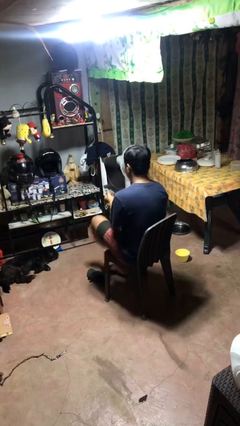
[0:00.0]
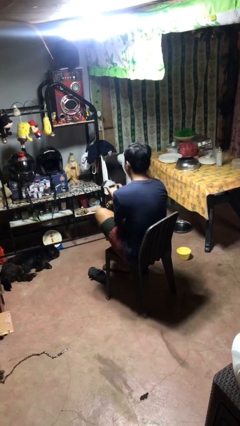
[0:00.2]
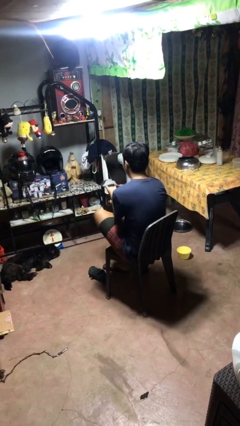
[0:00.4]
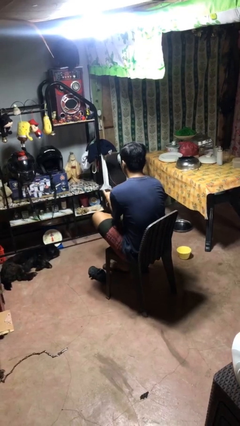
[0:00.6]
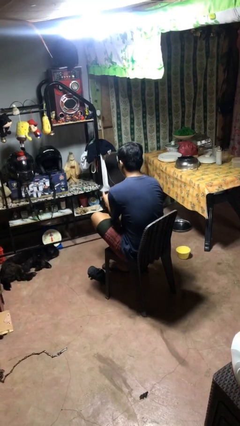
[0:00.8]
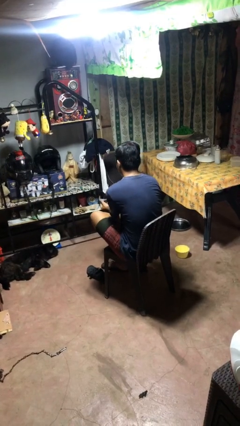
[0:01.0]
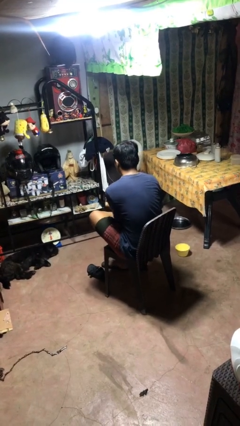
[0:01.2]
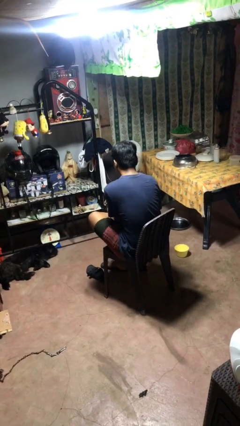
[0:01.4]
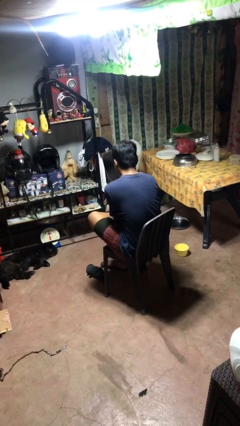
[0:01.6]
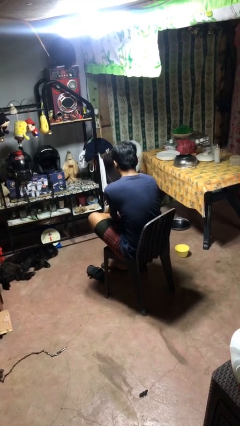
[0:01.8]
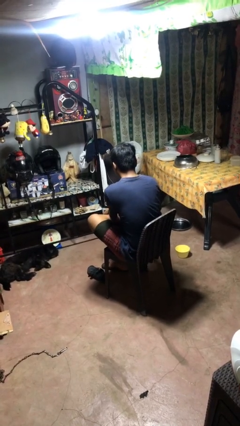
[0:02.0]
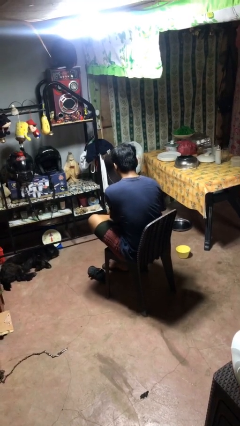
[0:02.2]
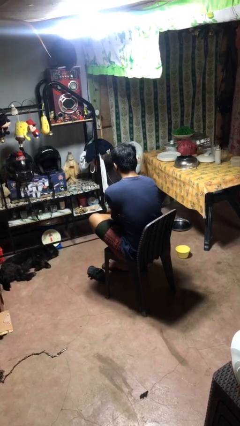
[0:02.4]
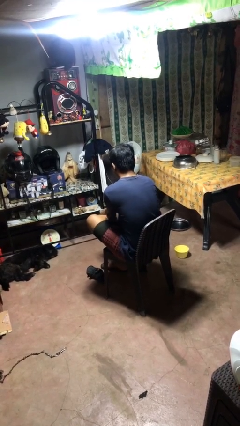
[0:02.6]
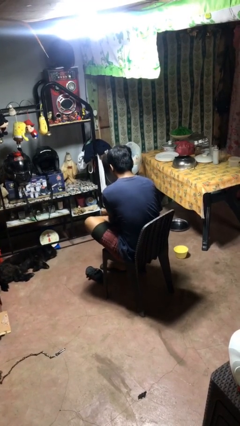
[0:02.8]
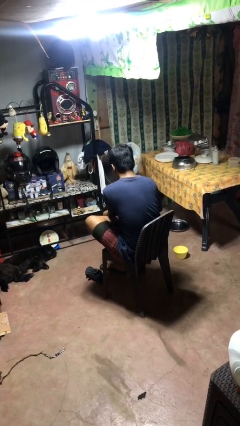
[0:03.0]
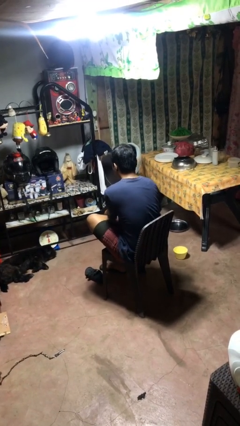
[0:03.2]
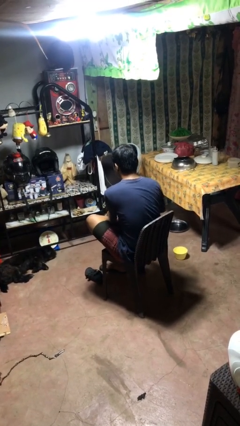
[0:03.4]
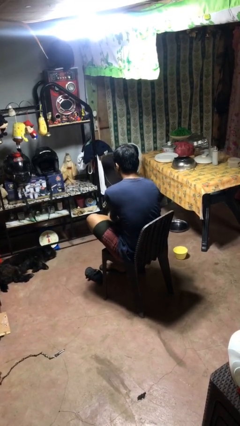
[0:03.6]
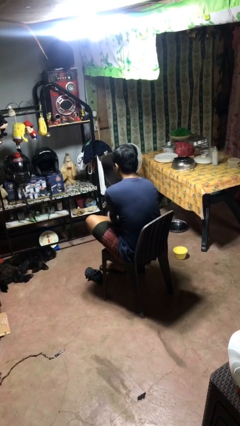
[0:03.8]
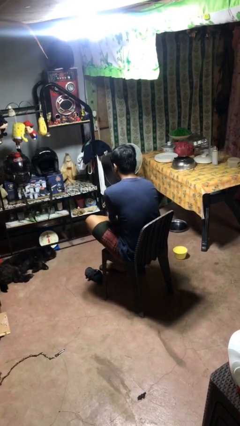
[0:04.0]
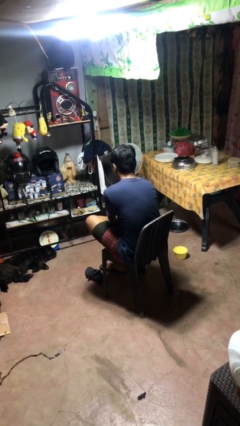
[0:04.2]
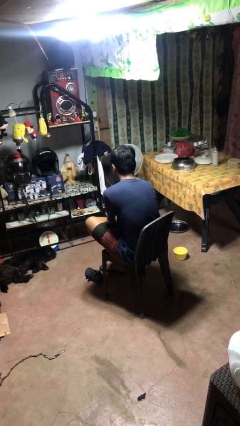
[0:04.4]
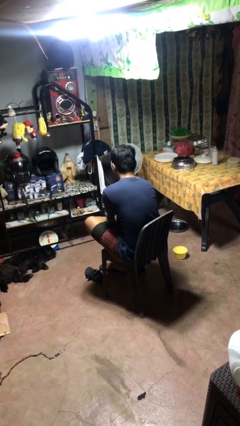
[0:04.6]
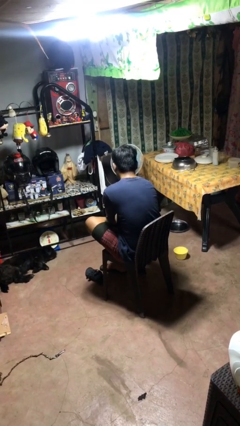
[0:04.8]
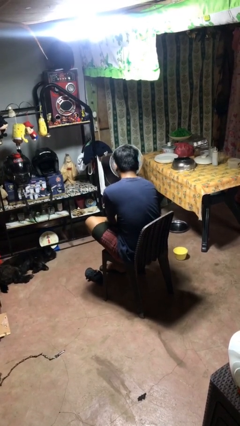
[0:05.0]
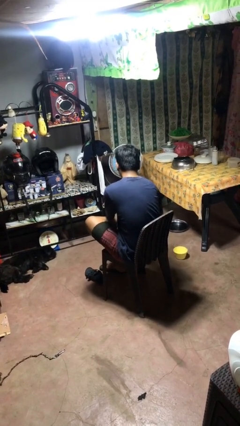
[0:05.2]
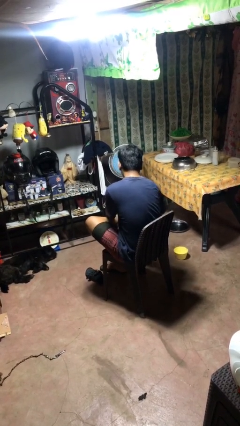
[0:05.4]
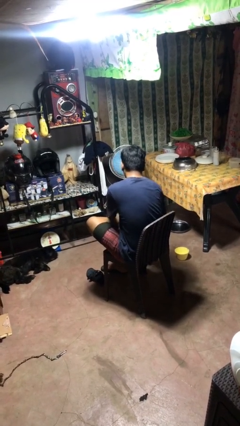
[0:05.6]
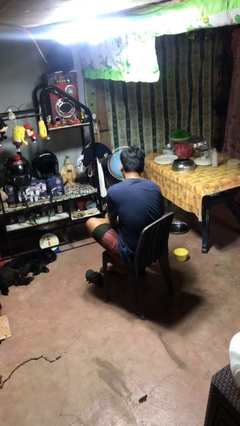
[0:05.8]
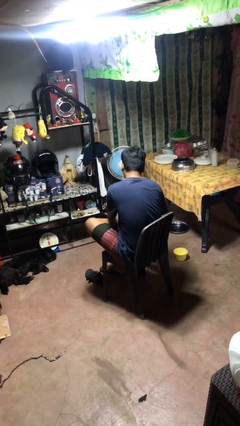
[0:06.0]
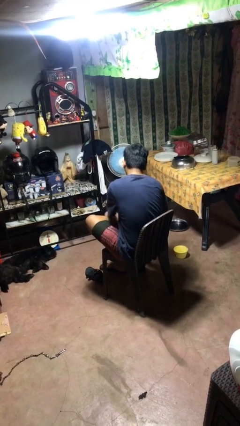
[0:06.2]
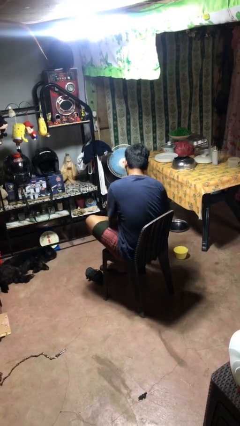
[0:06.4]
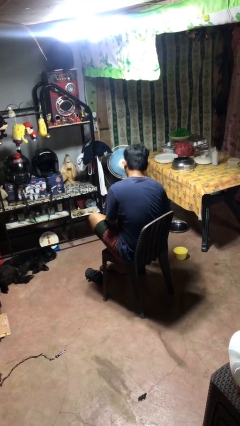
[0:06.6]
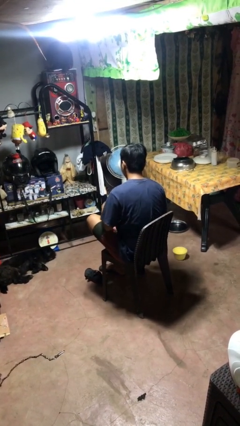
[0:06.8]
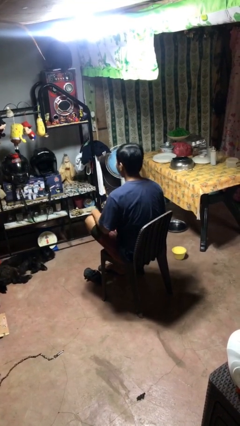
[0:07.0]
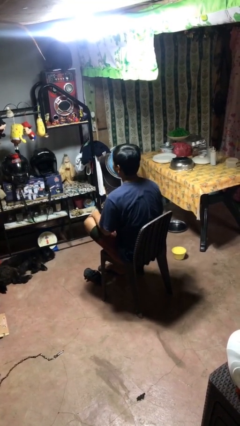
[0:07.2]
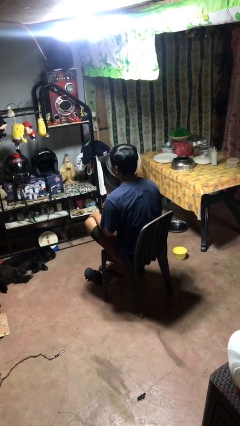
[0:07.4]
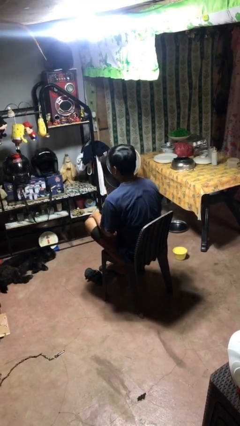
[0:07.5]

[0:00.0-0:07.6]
person puts on socks

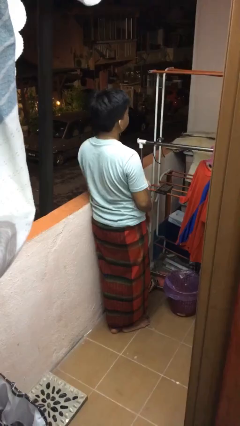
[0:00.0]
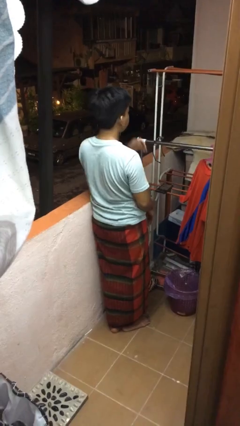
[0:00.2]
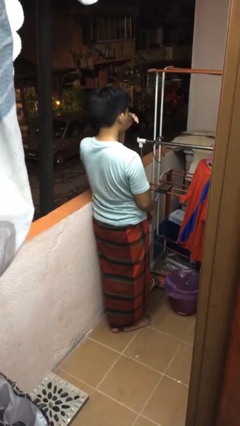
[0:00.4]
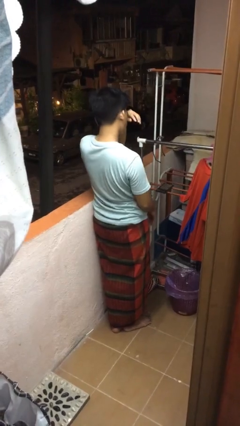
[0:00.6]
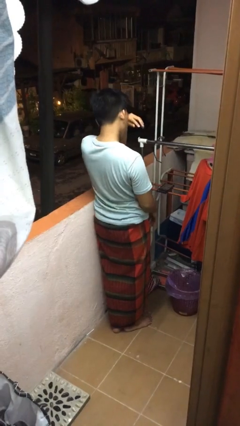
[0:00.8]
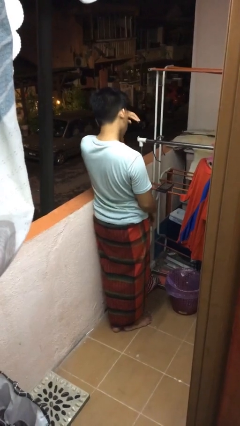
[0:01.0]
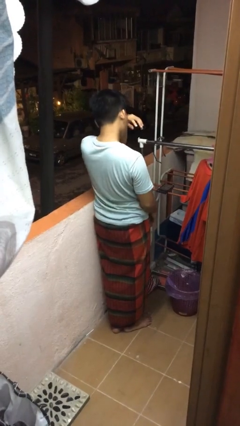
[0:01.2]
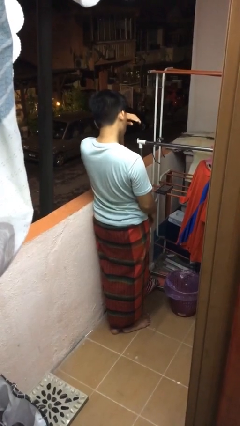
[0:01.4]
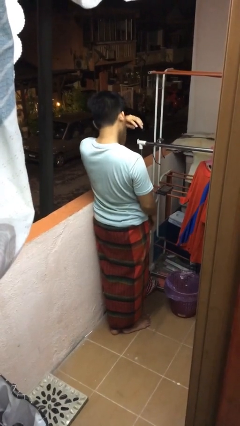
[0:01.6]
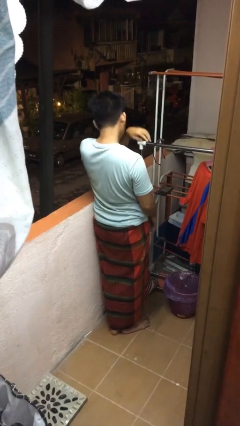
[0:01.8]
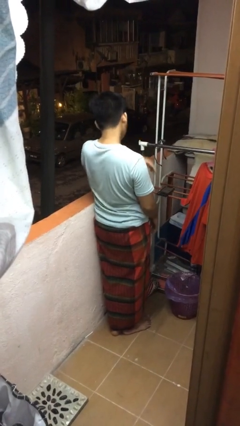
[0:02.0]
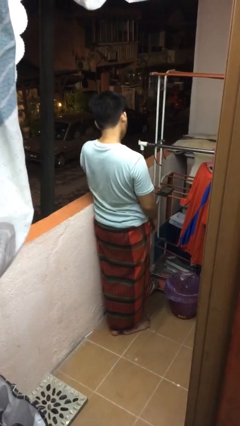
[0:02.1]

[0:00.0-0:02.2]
person rubs eyes

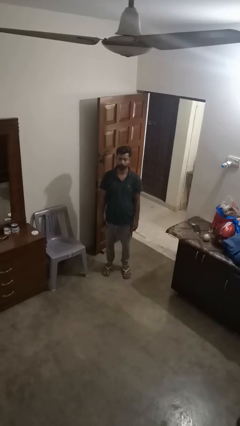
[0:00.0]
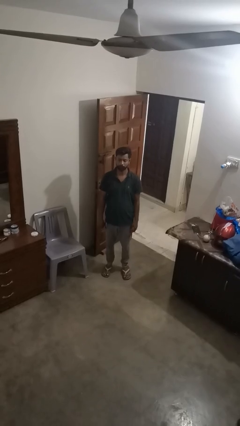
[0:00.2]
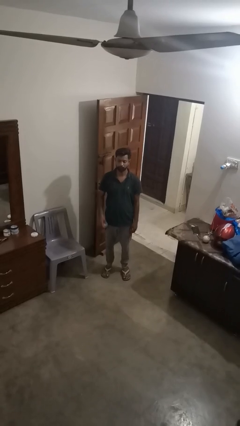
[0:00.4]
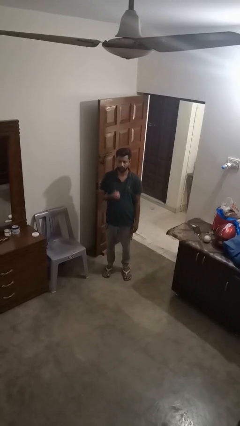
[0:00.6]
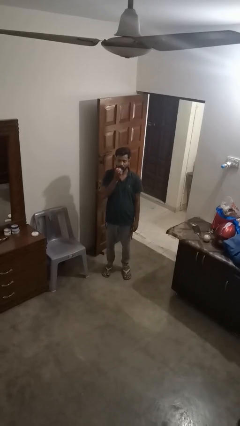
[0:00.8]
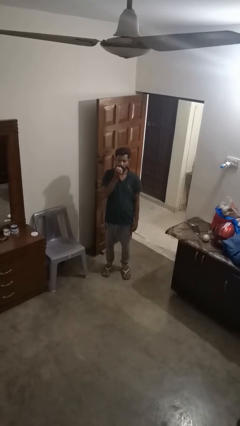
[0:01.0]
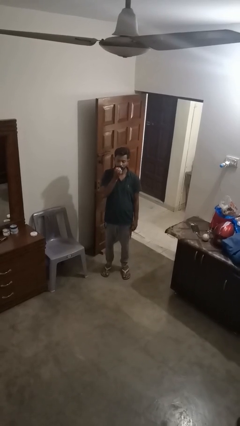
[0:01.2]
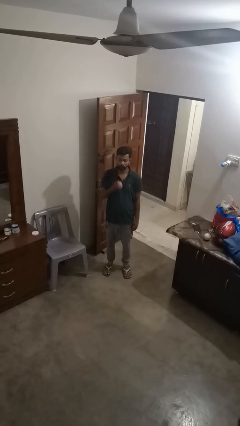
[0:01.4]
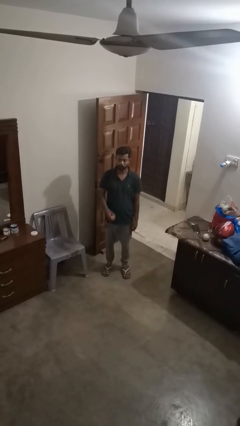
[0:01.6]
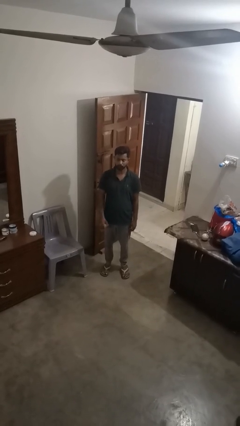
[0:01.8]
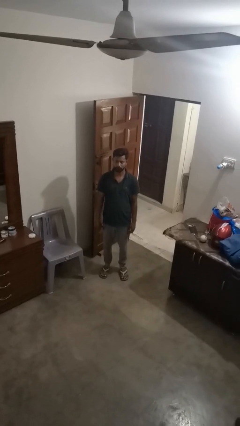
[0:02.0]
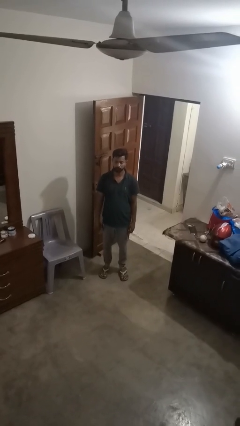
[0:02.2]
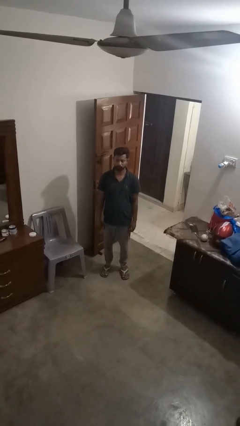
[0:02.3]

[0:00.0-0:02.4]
person eats apple

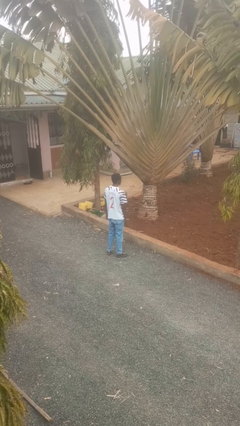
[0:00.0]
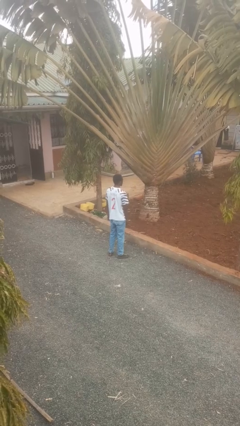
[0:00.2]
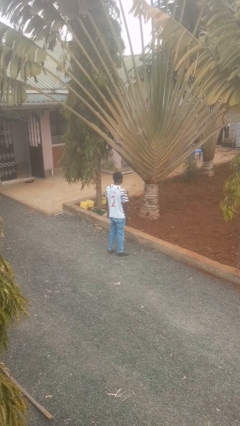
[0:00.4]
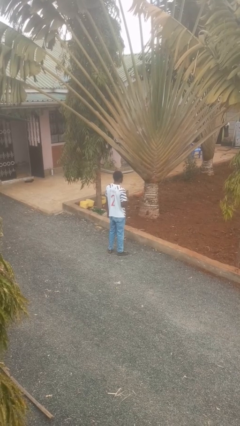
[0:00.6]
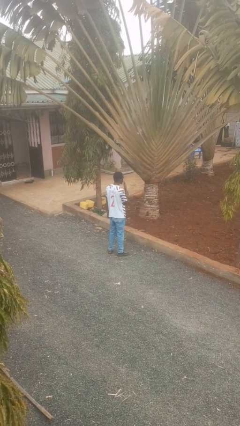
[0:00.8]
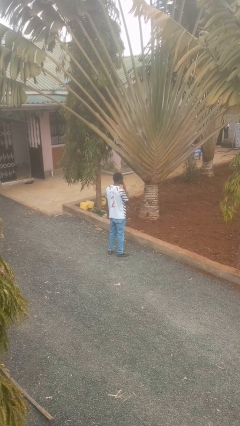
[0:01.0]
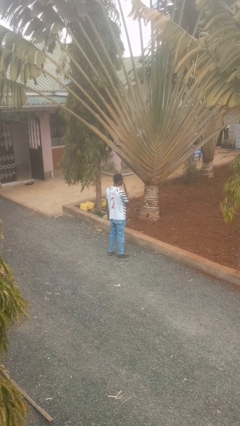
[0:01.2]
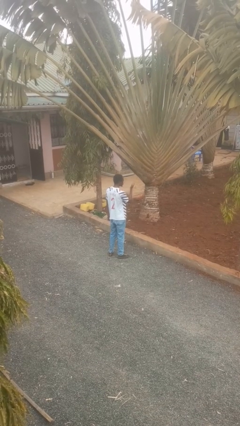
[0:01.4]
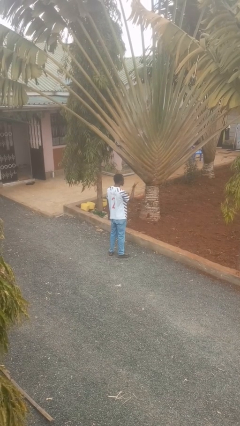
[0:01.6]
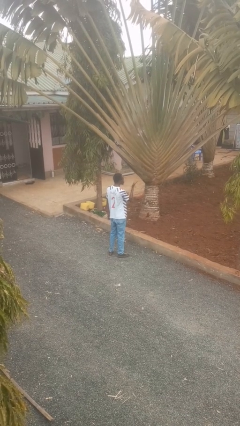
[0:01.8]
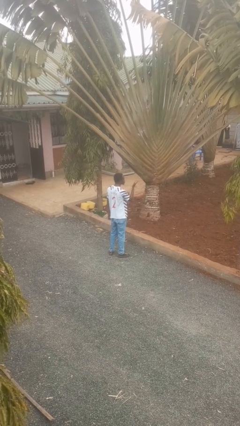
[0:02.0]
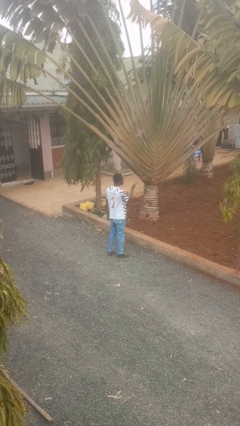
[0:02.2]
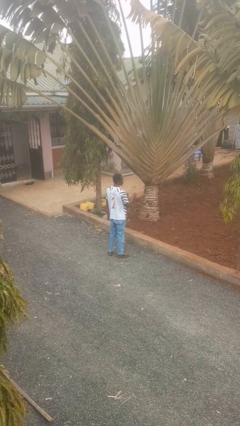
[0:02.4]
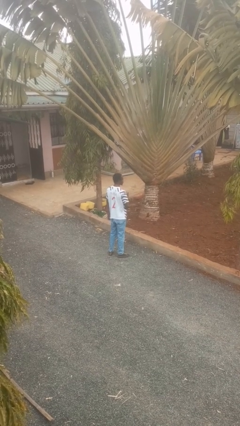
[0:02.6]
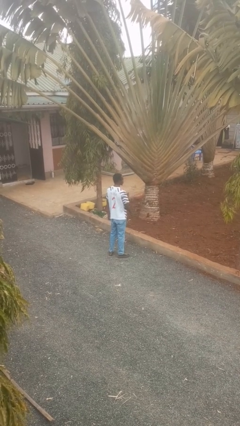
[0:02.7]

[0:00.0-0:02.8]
person gestures blow kiss

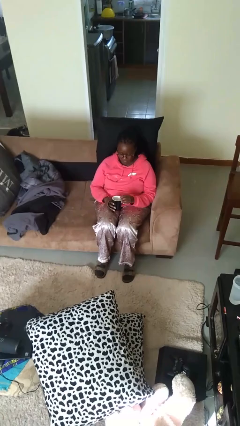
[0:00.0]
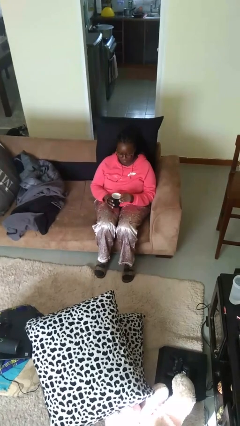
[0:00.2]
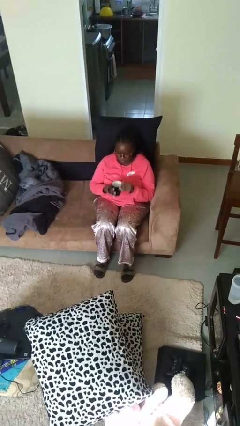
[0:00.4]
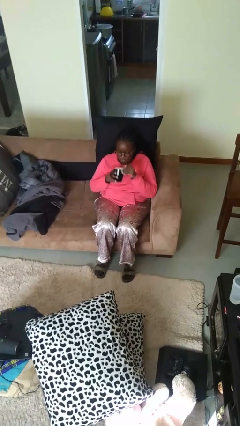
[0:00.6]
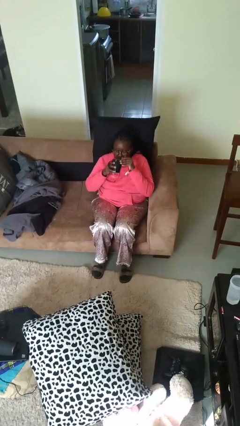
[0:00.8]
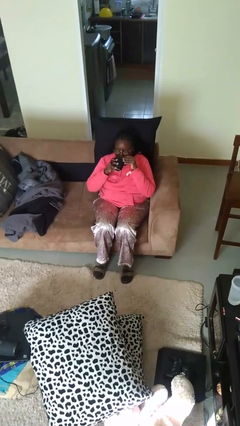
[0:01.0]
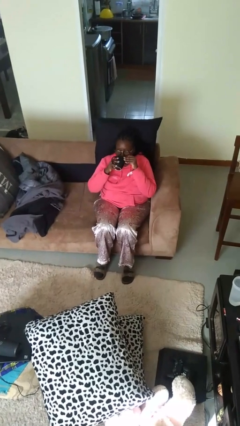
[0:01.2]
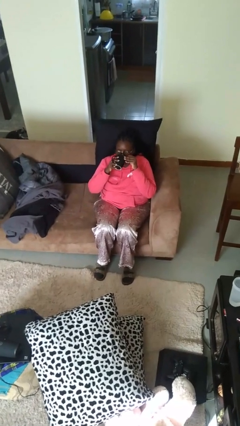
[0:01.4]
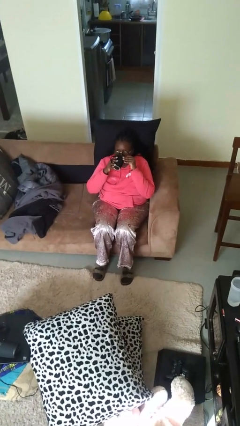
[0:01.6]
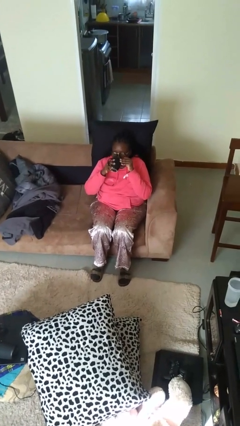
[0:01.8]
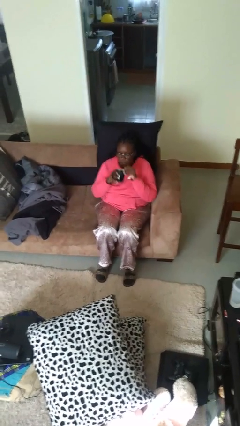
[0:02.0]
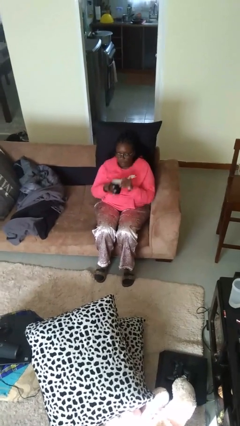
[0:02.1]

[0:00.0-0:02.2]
person drinks from mug

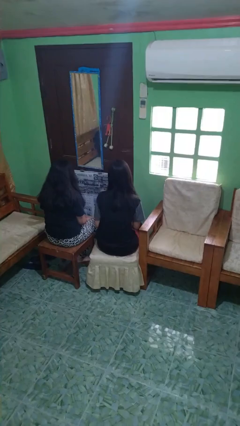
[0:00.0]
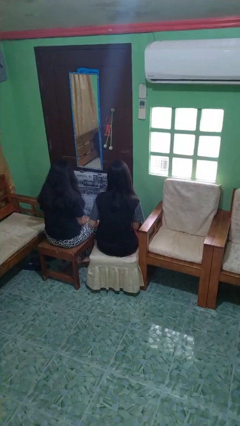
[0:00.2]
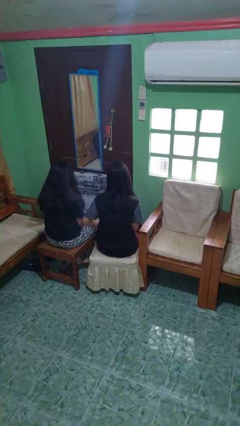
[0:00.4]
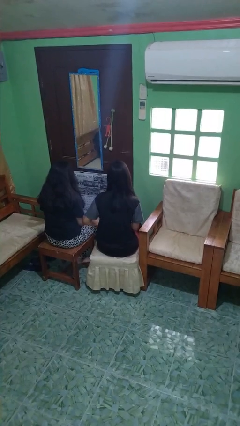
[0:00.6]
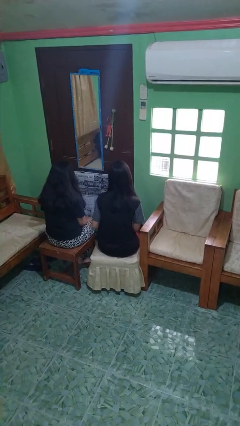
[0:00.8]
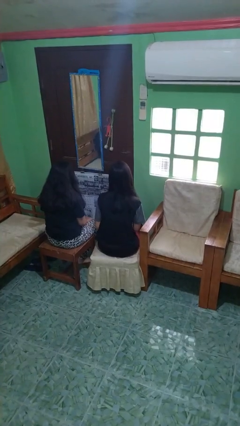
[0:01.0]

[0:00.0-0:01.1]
person nudges person with elbow
